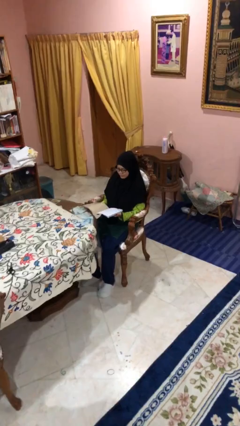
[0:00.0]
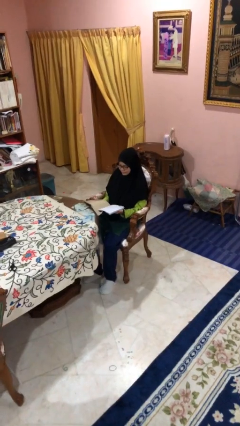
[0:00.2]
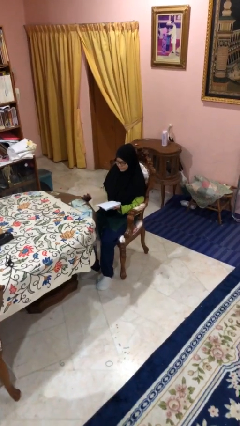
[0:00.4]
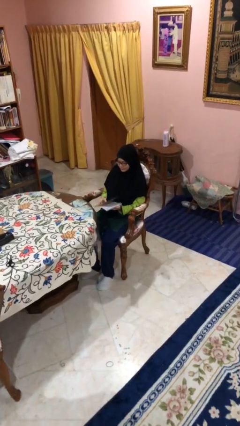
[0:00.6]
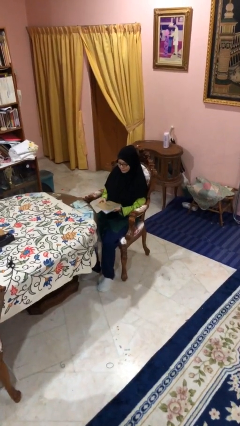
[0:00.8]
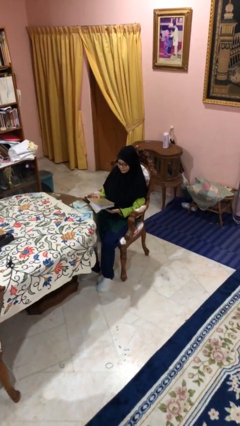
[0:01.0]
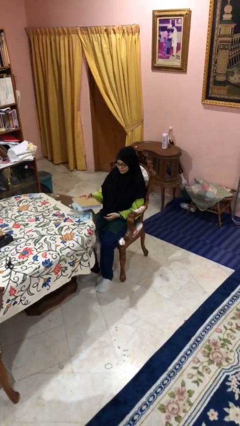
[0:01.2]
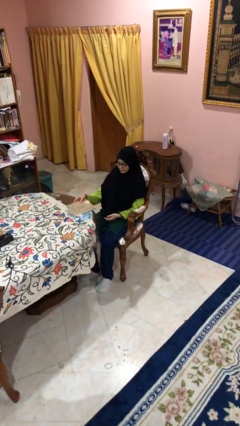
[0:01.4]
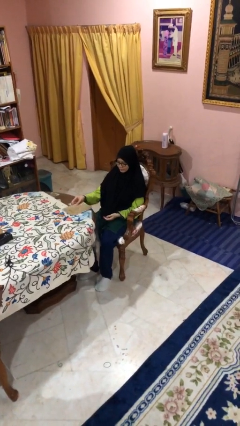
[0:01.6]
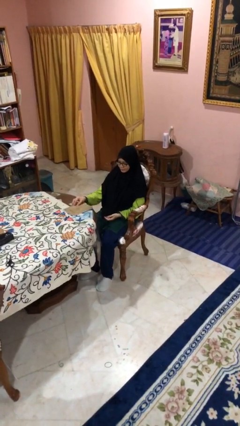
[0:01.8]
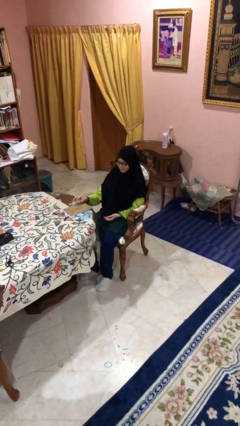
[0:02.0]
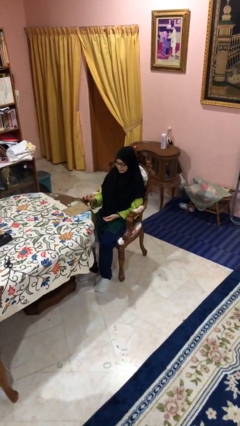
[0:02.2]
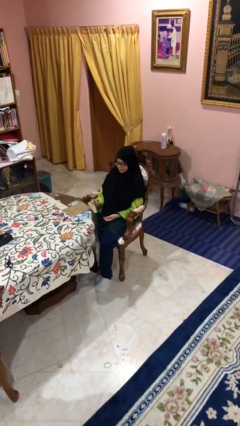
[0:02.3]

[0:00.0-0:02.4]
person puts down object on table

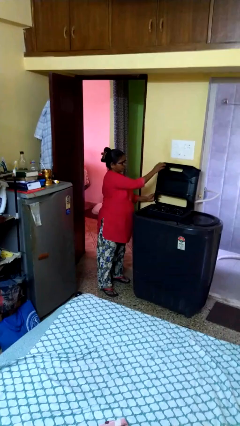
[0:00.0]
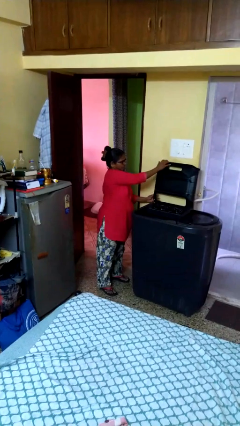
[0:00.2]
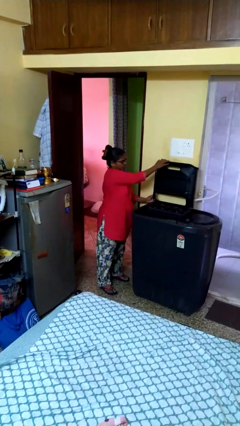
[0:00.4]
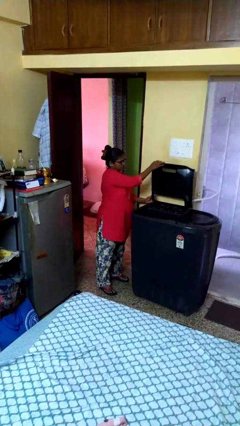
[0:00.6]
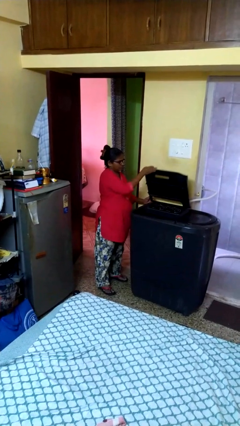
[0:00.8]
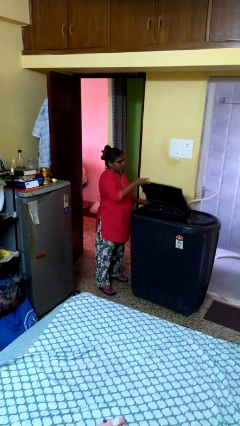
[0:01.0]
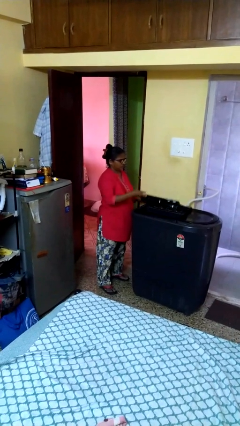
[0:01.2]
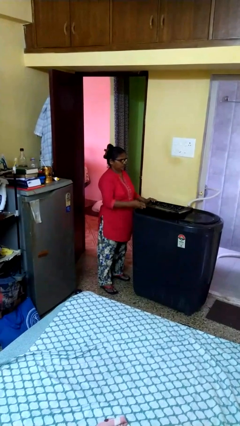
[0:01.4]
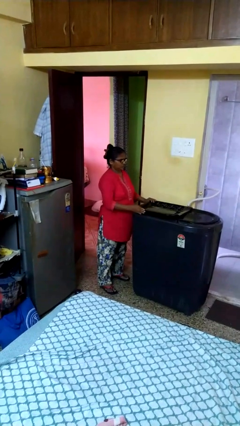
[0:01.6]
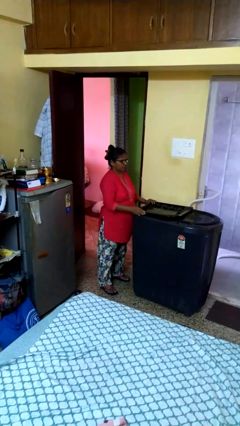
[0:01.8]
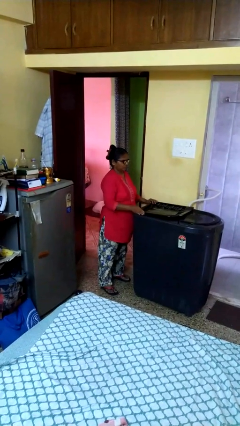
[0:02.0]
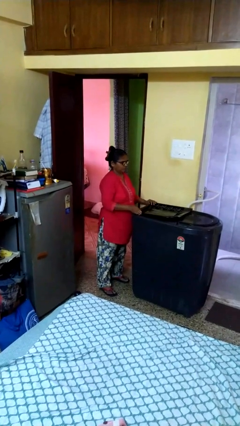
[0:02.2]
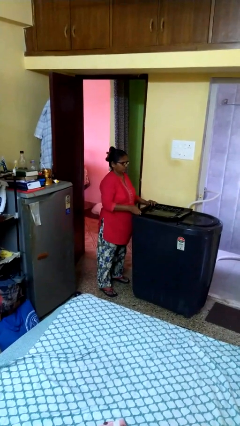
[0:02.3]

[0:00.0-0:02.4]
person closes clothes washer

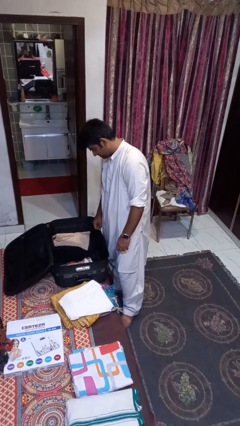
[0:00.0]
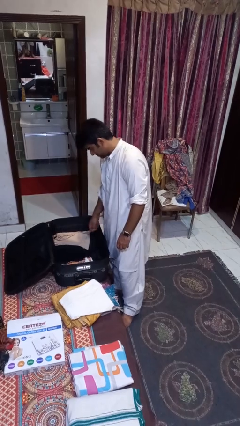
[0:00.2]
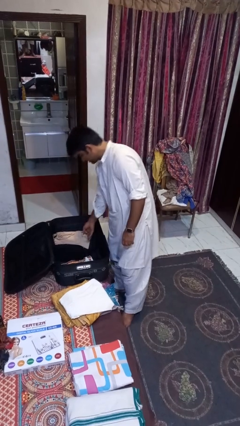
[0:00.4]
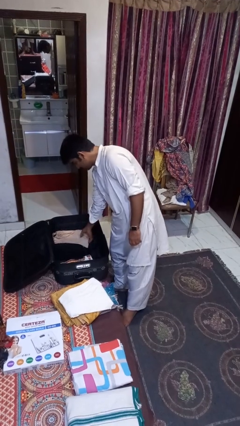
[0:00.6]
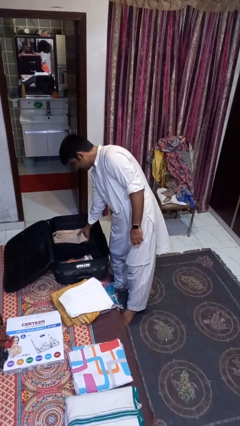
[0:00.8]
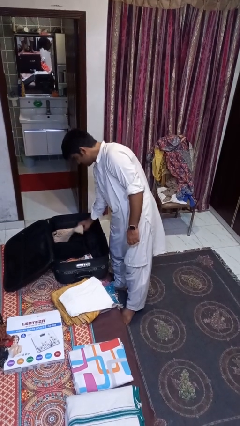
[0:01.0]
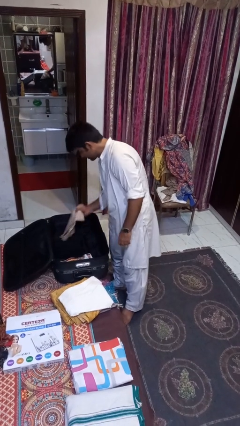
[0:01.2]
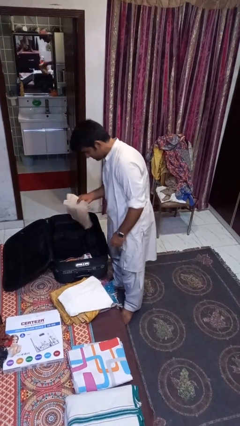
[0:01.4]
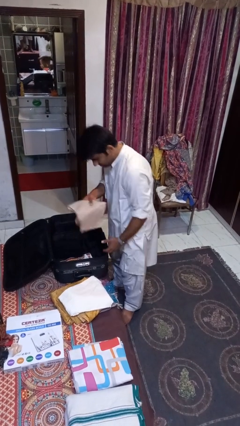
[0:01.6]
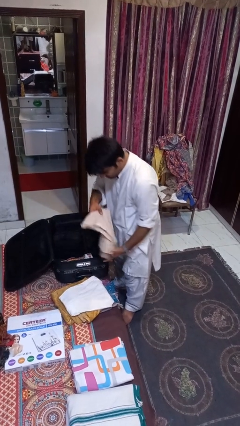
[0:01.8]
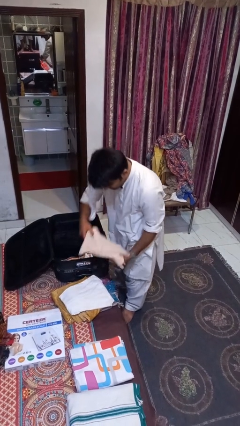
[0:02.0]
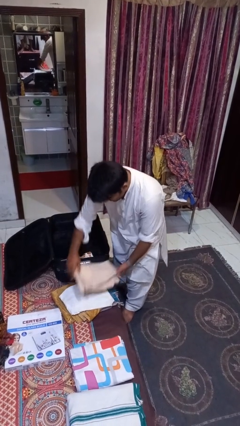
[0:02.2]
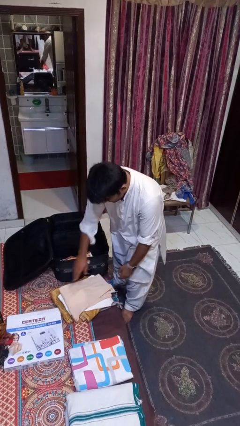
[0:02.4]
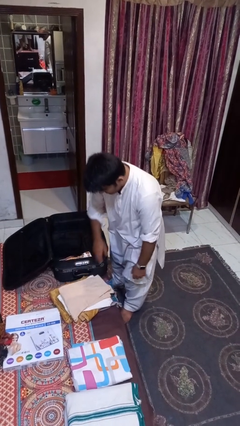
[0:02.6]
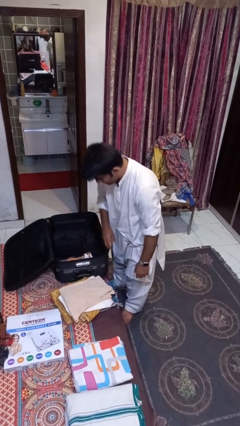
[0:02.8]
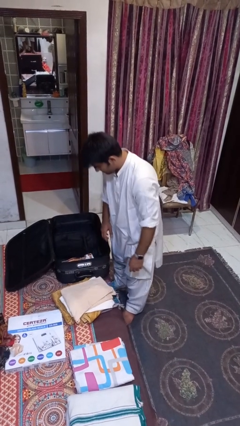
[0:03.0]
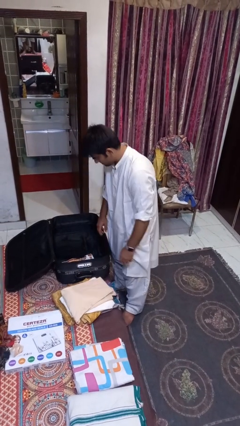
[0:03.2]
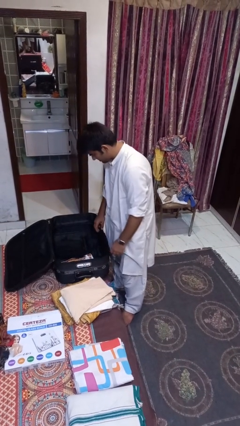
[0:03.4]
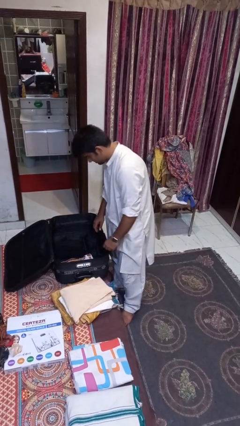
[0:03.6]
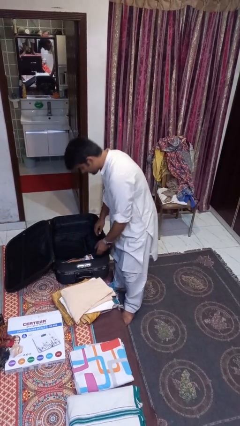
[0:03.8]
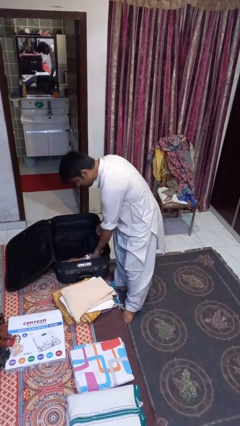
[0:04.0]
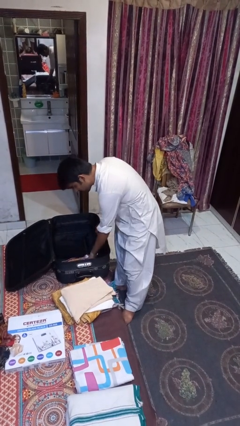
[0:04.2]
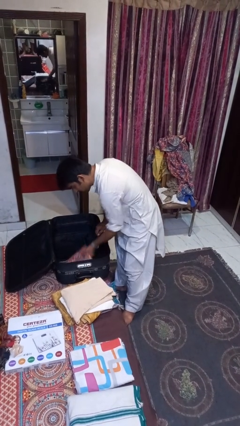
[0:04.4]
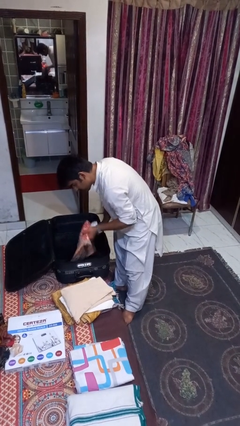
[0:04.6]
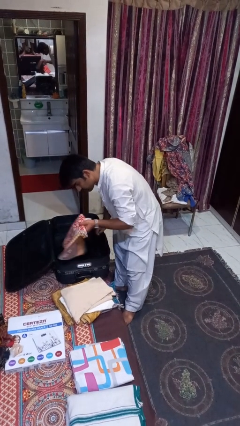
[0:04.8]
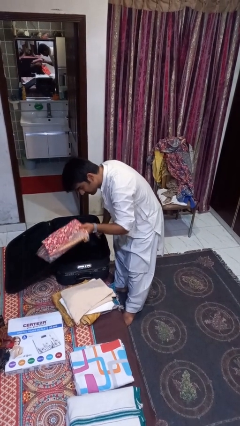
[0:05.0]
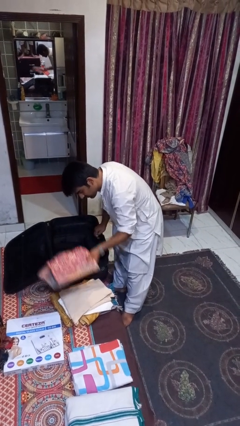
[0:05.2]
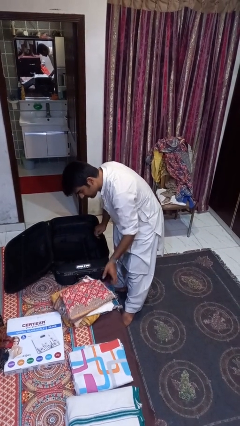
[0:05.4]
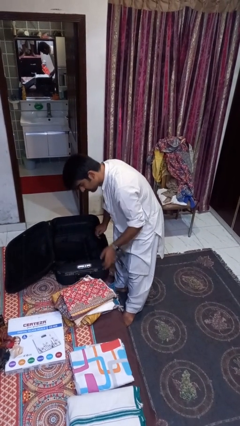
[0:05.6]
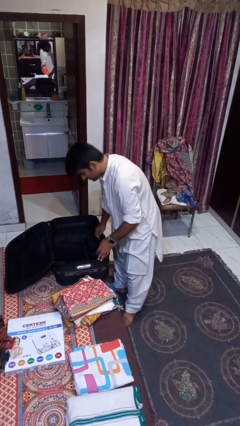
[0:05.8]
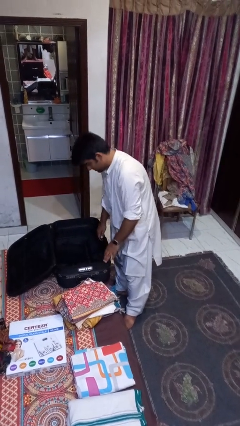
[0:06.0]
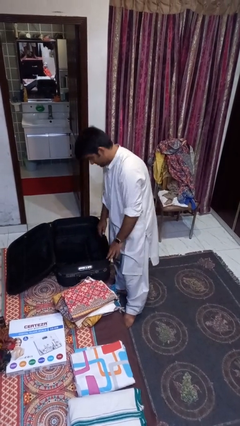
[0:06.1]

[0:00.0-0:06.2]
person unloads clothes from suitcase

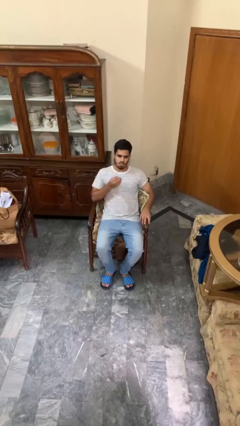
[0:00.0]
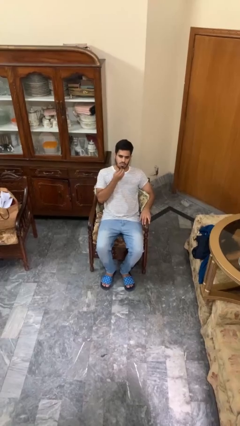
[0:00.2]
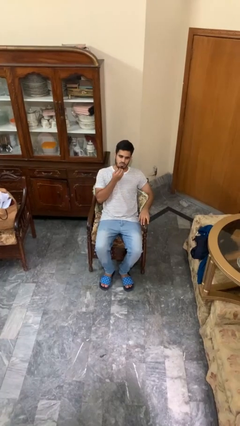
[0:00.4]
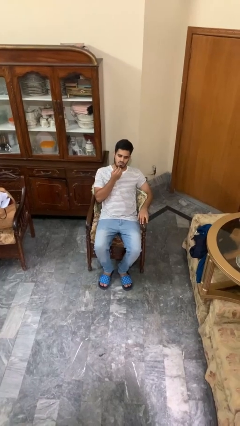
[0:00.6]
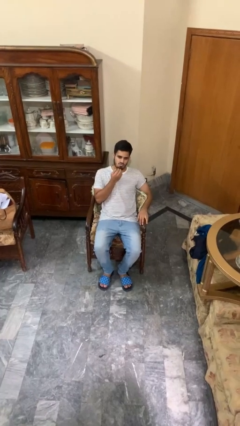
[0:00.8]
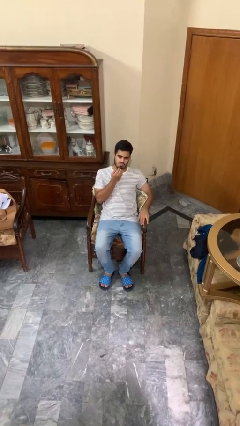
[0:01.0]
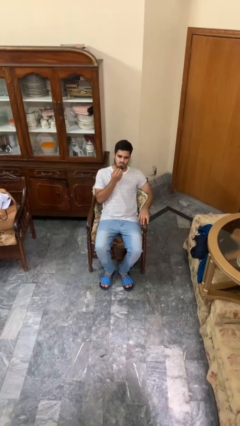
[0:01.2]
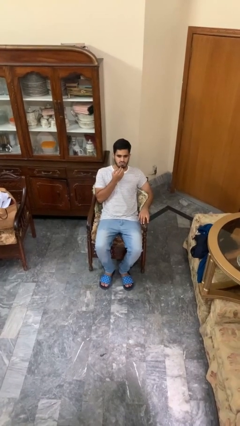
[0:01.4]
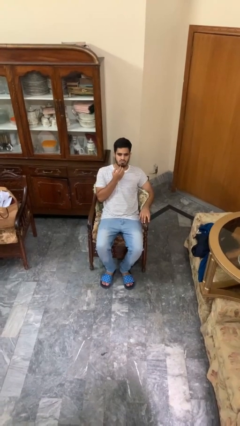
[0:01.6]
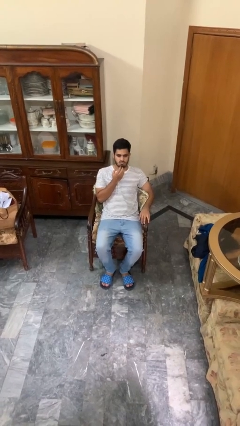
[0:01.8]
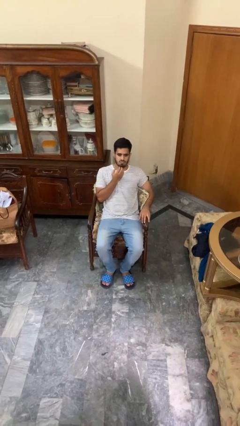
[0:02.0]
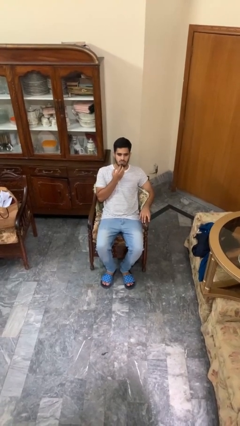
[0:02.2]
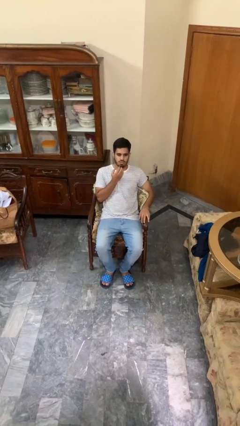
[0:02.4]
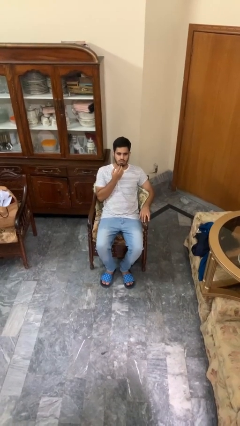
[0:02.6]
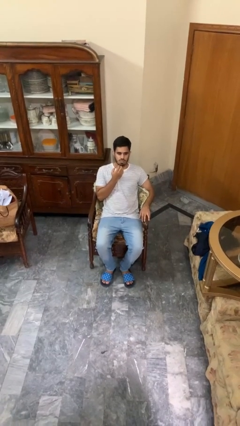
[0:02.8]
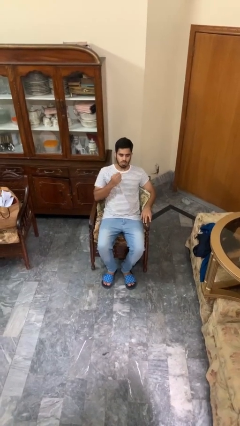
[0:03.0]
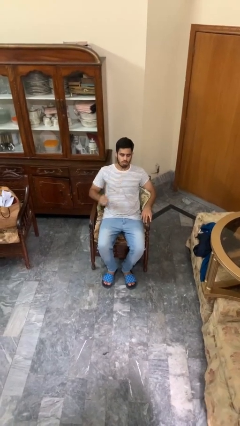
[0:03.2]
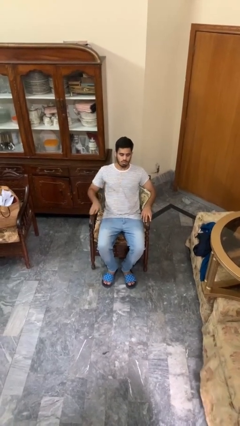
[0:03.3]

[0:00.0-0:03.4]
person strokes chin

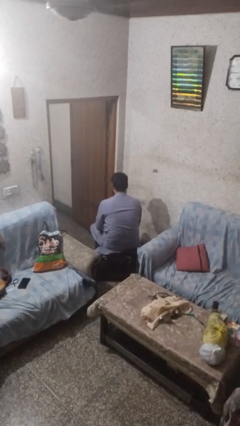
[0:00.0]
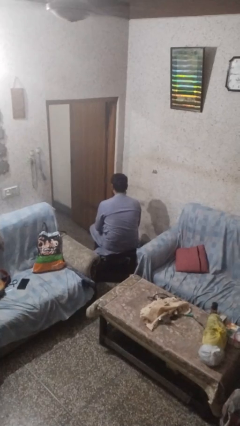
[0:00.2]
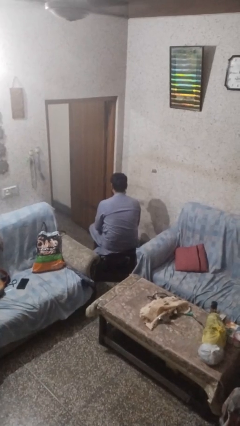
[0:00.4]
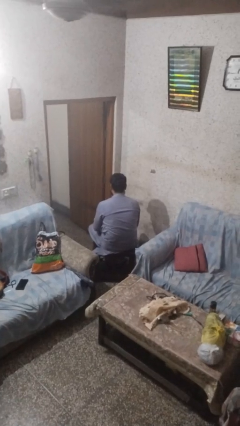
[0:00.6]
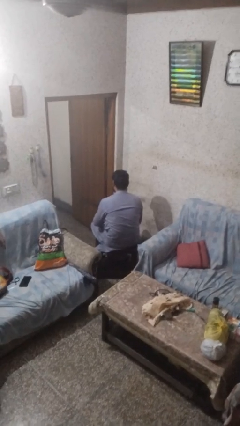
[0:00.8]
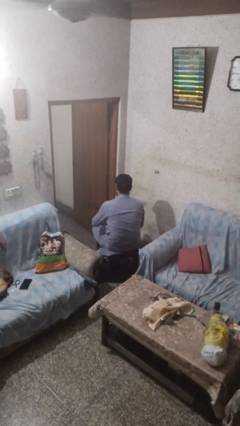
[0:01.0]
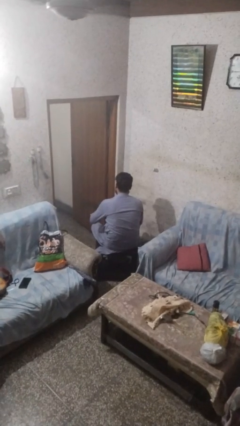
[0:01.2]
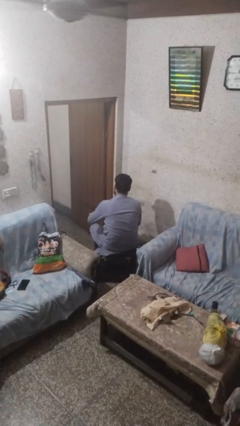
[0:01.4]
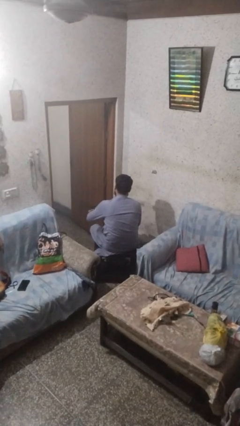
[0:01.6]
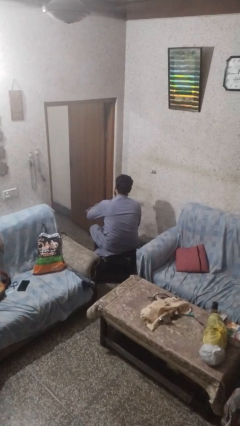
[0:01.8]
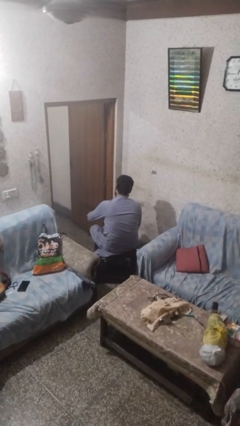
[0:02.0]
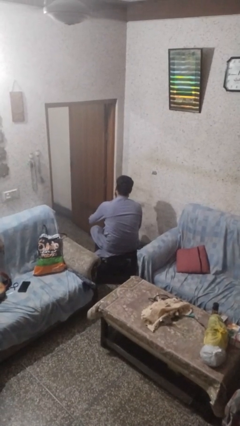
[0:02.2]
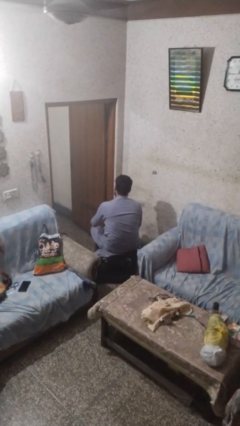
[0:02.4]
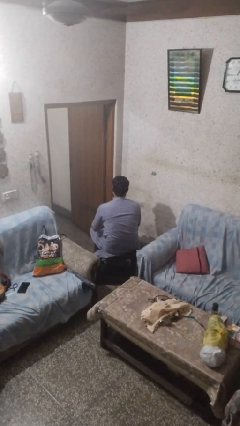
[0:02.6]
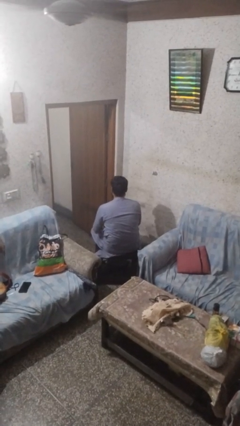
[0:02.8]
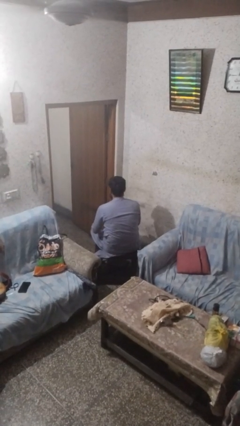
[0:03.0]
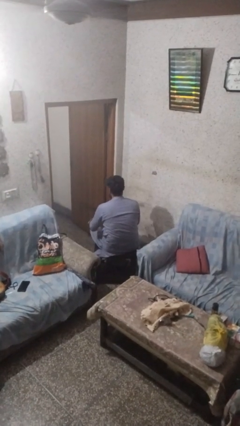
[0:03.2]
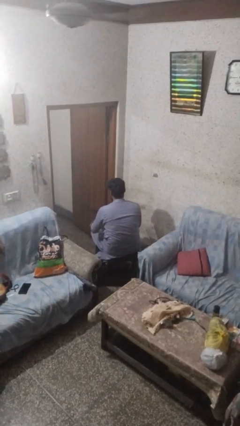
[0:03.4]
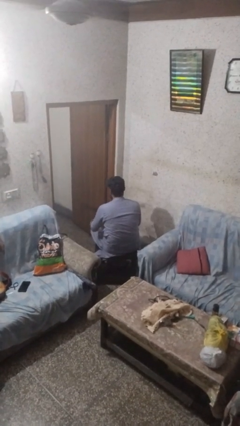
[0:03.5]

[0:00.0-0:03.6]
person opens beverage can
